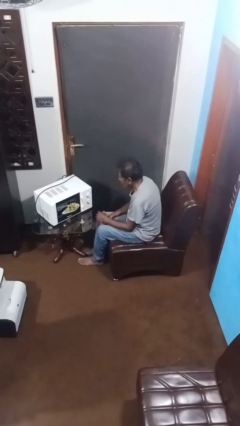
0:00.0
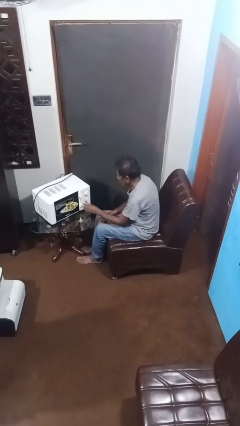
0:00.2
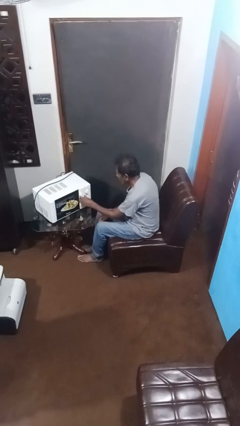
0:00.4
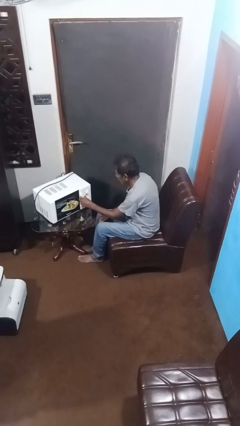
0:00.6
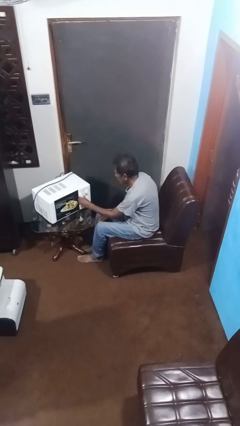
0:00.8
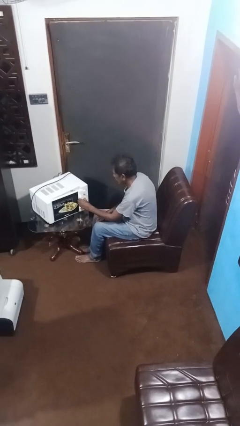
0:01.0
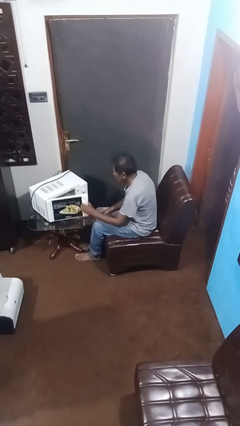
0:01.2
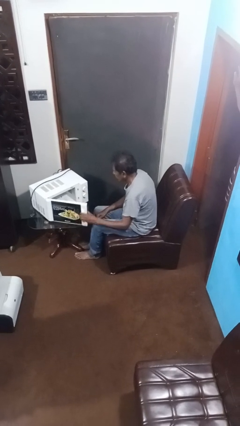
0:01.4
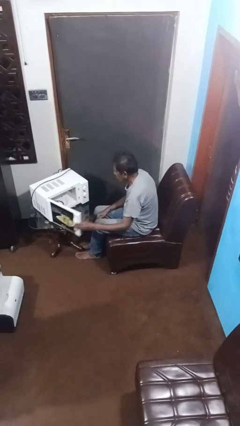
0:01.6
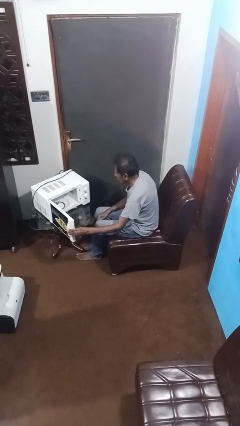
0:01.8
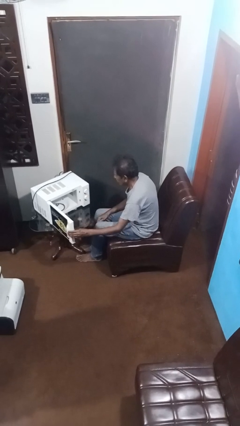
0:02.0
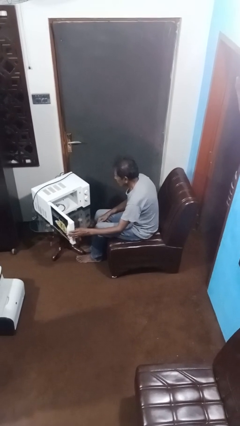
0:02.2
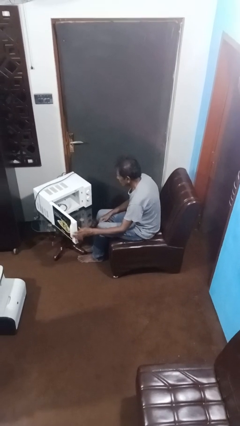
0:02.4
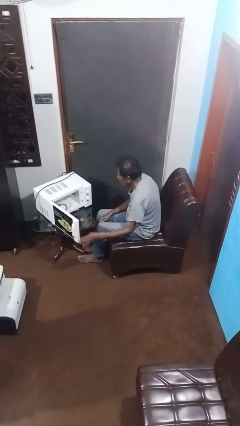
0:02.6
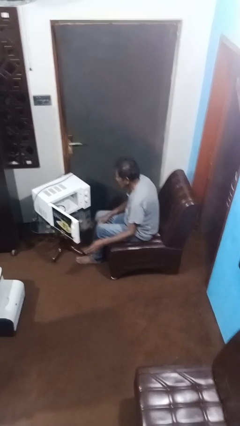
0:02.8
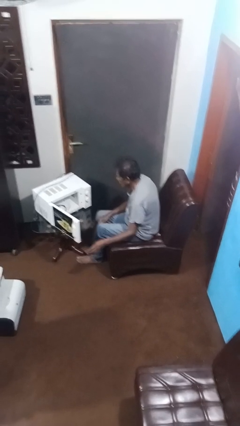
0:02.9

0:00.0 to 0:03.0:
person opens microwave

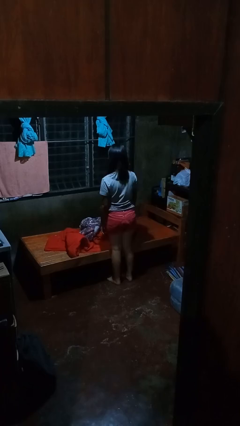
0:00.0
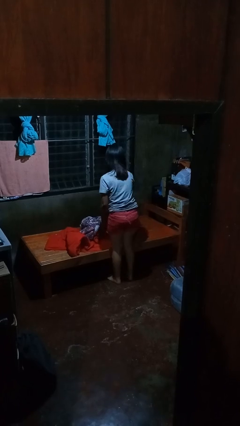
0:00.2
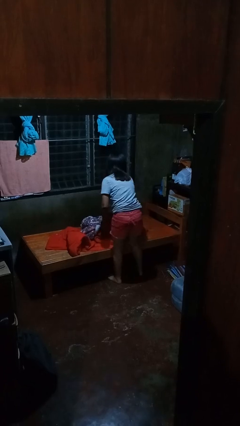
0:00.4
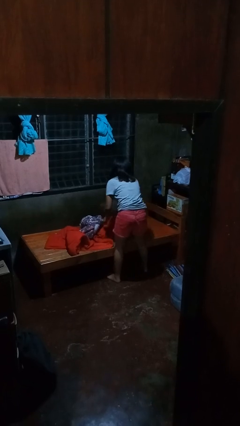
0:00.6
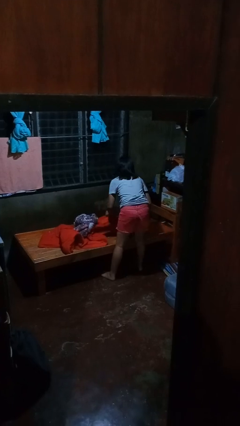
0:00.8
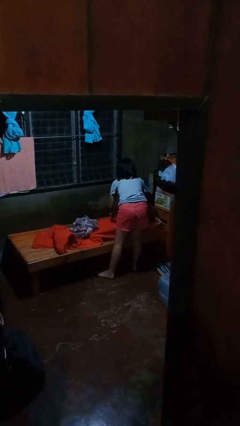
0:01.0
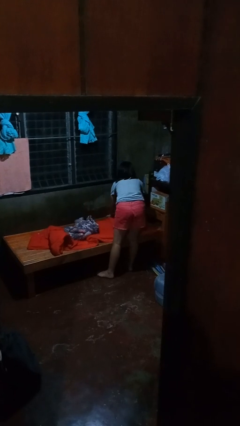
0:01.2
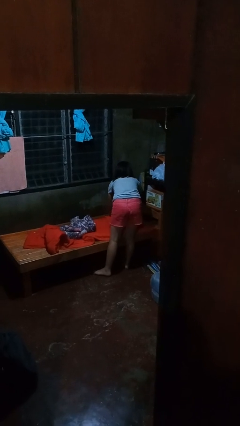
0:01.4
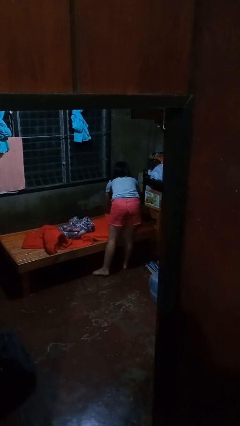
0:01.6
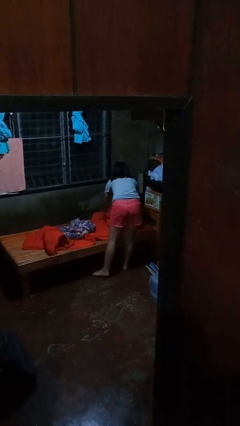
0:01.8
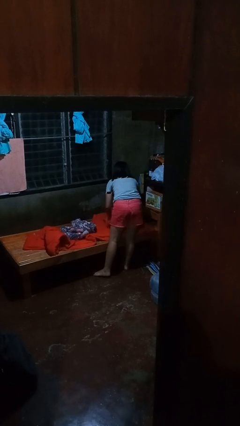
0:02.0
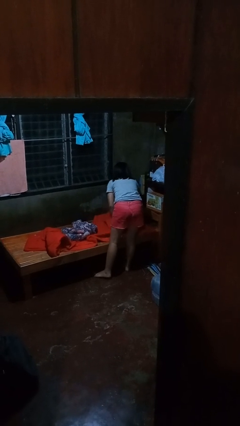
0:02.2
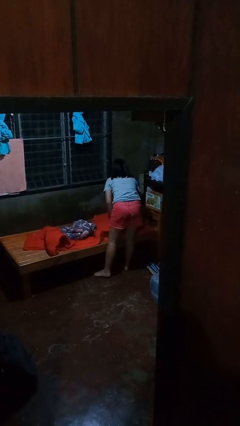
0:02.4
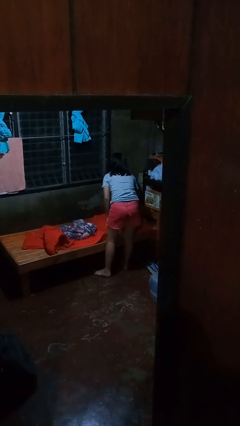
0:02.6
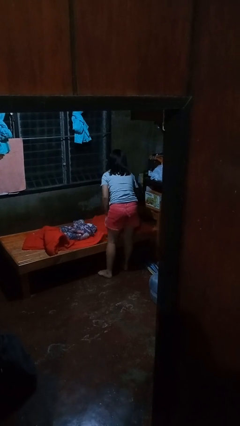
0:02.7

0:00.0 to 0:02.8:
person makes bed

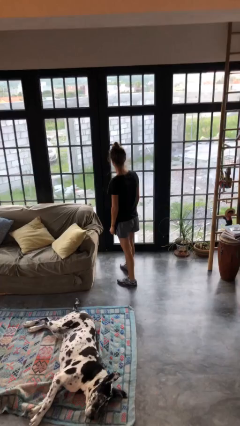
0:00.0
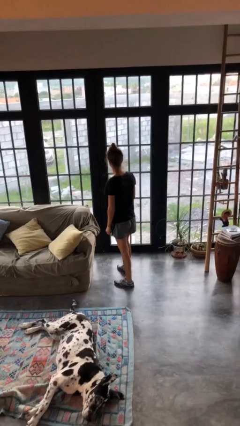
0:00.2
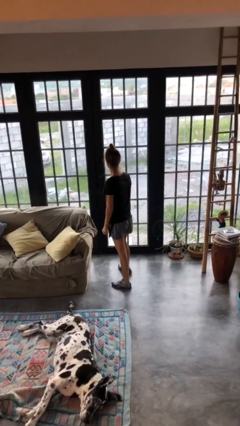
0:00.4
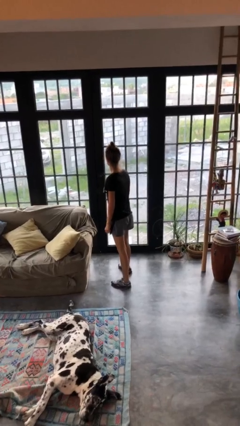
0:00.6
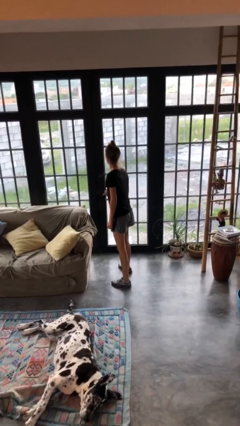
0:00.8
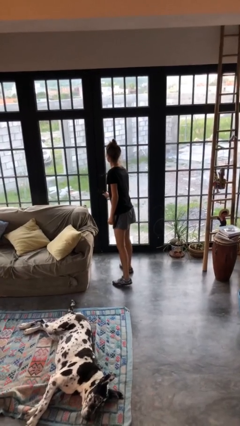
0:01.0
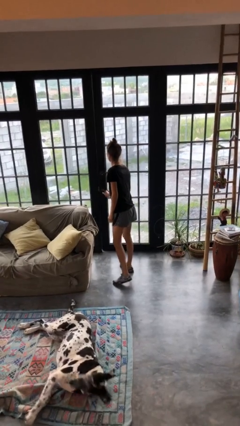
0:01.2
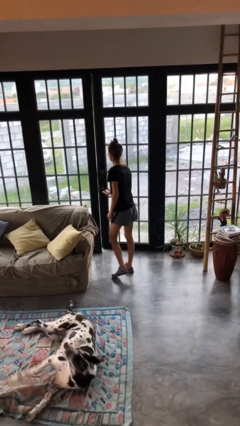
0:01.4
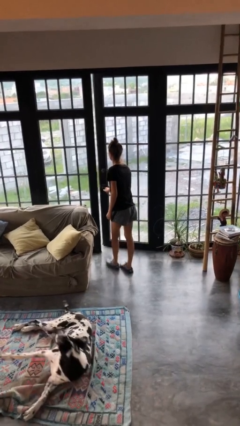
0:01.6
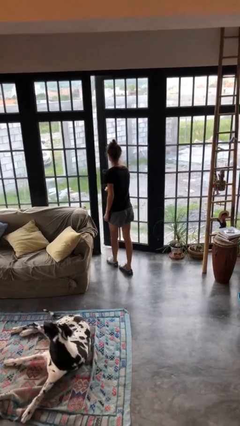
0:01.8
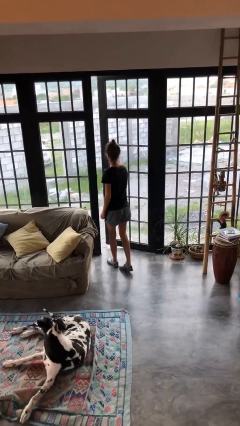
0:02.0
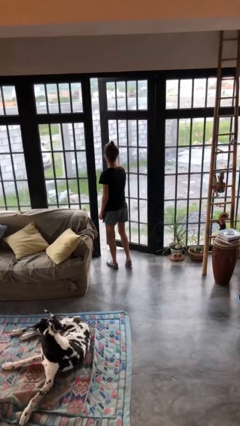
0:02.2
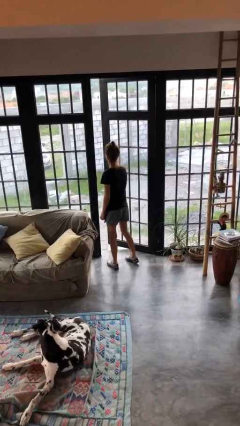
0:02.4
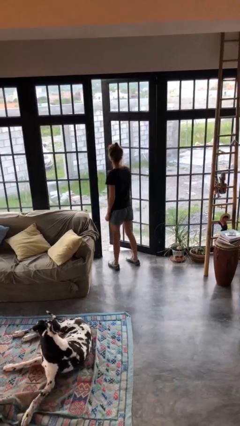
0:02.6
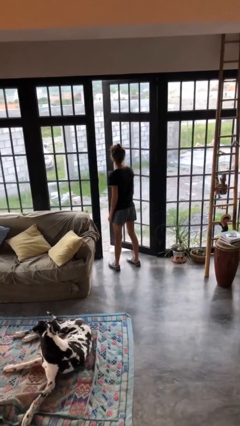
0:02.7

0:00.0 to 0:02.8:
person opens facility door

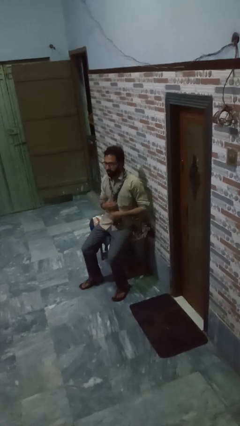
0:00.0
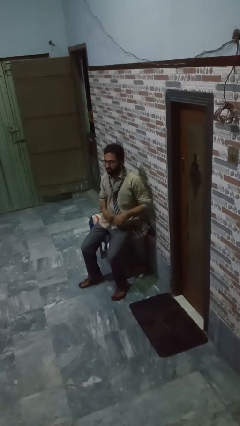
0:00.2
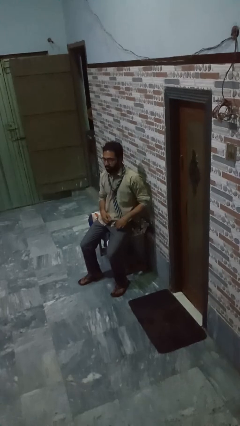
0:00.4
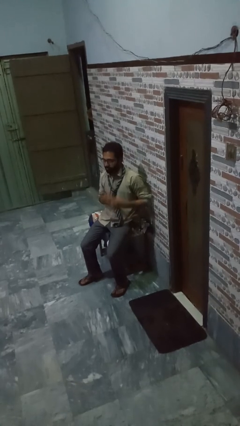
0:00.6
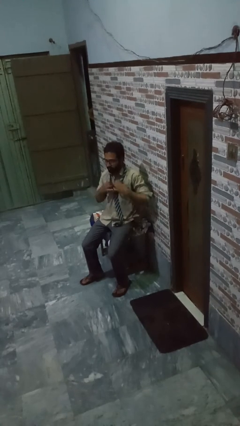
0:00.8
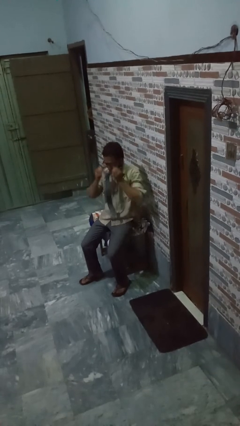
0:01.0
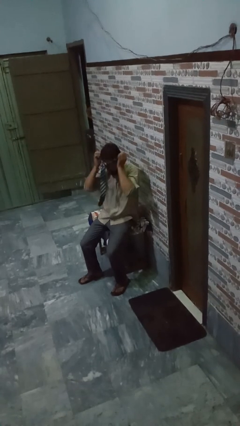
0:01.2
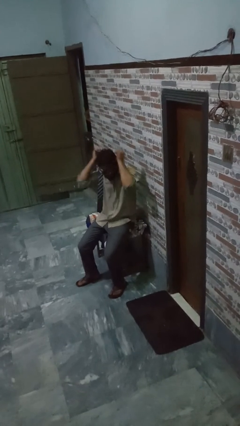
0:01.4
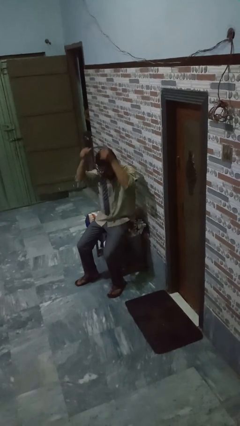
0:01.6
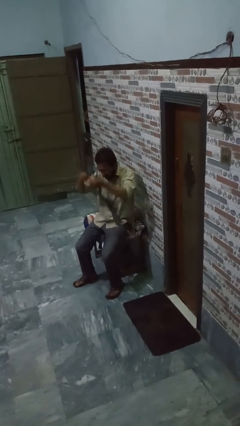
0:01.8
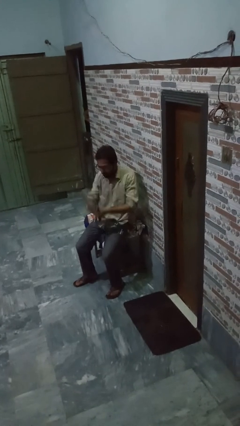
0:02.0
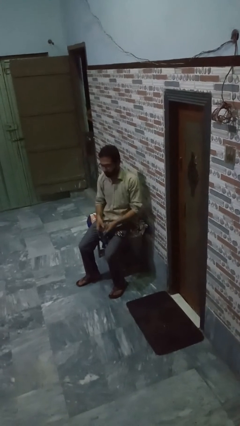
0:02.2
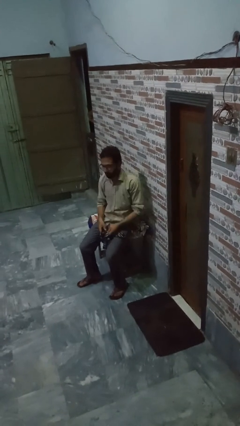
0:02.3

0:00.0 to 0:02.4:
person takes off necktie

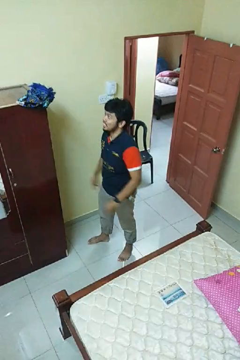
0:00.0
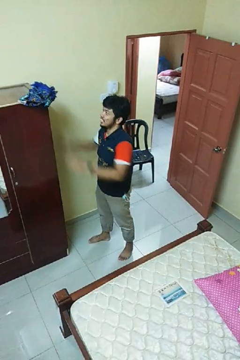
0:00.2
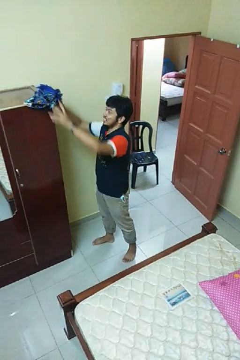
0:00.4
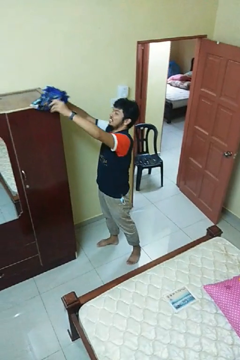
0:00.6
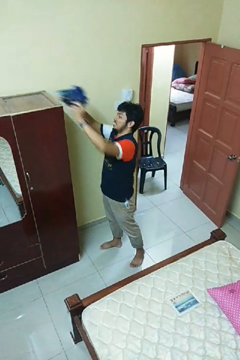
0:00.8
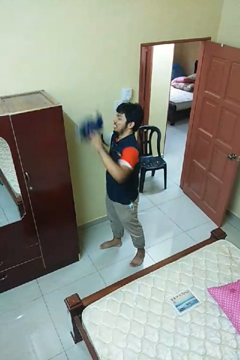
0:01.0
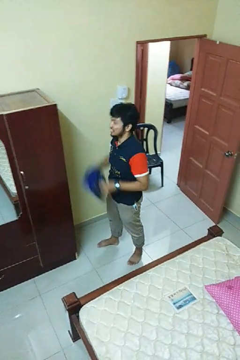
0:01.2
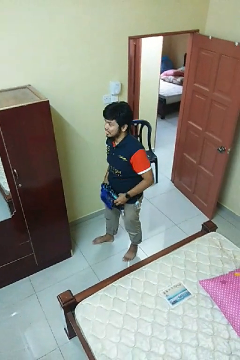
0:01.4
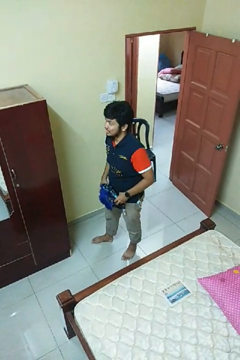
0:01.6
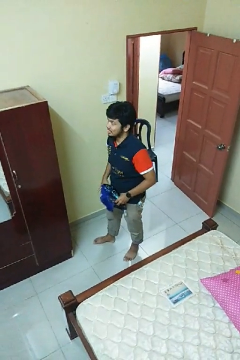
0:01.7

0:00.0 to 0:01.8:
person picks up object from countertop

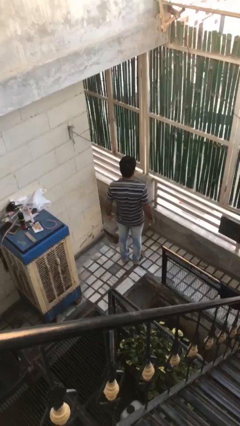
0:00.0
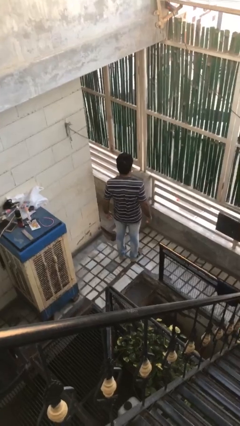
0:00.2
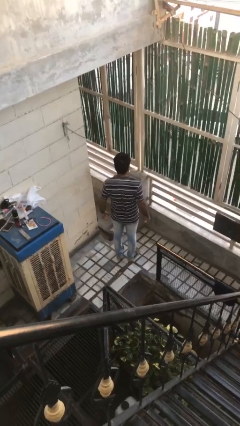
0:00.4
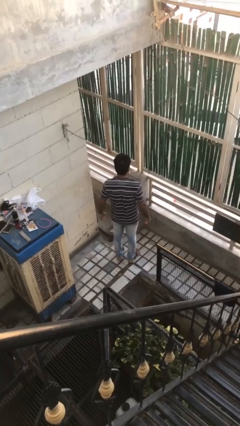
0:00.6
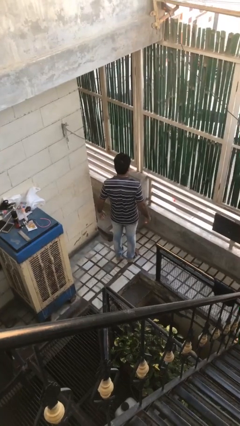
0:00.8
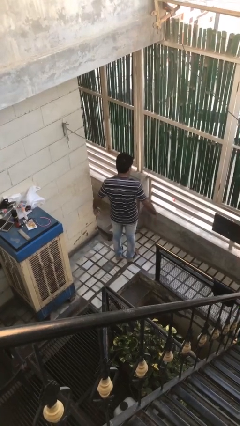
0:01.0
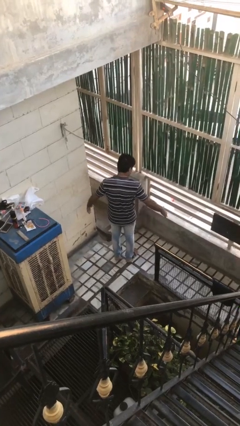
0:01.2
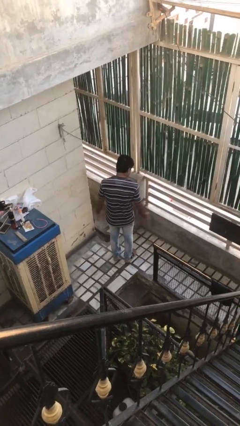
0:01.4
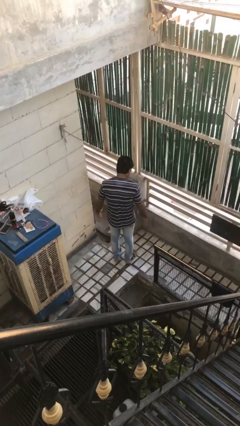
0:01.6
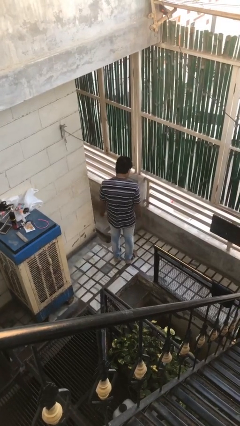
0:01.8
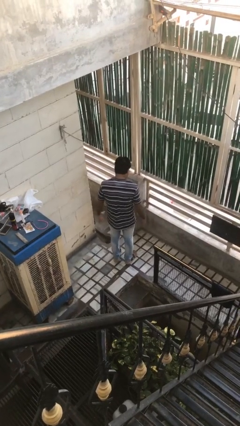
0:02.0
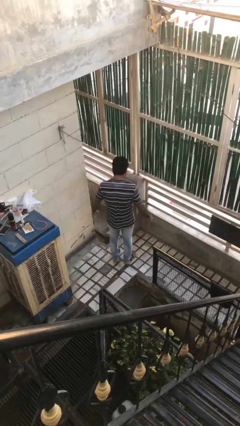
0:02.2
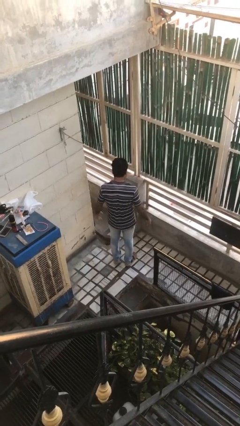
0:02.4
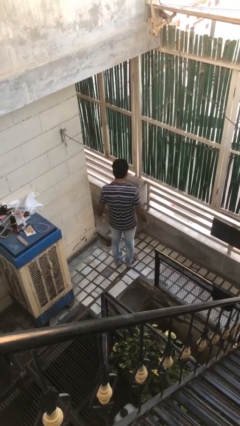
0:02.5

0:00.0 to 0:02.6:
person slaps hands on thighs

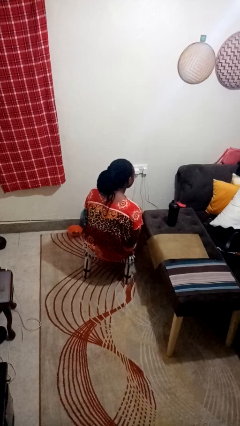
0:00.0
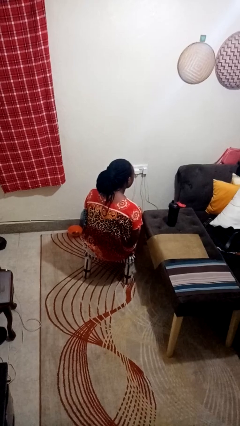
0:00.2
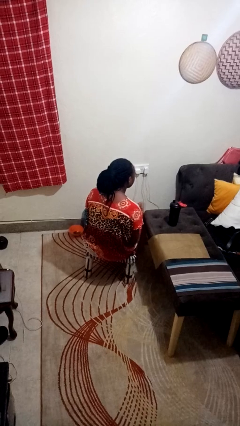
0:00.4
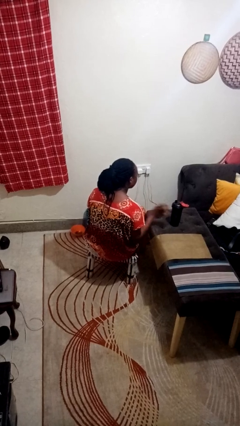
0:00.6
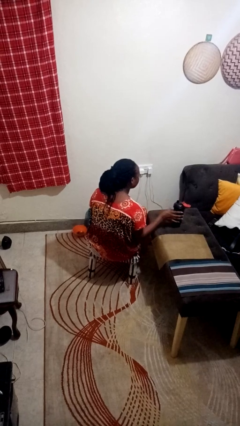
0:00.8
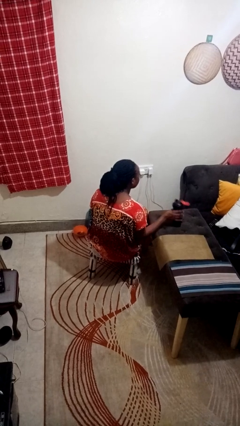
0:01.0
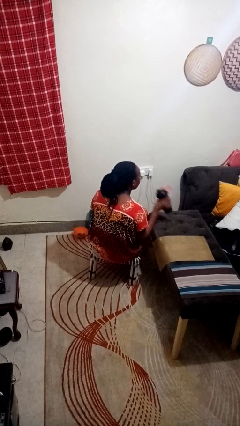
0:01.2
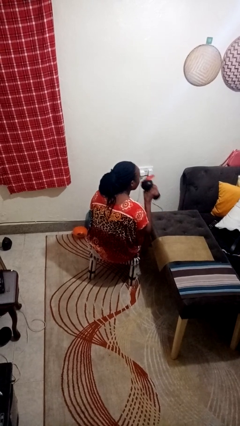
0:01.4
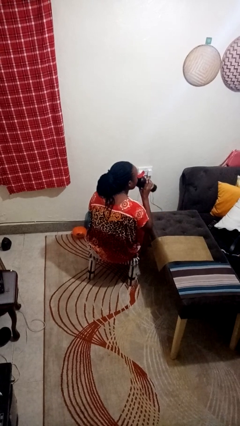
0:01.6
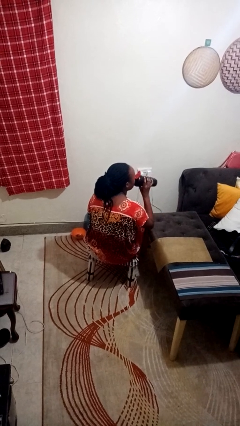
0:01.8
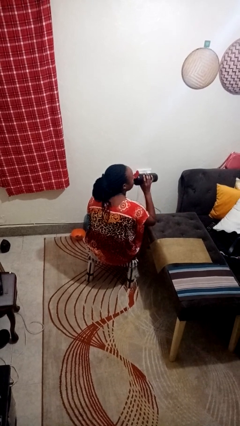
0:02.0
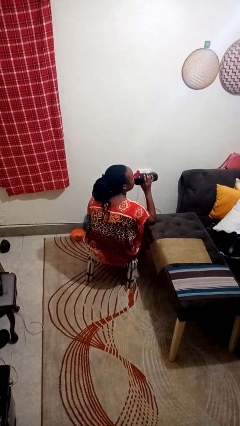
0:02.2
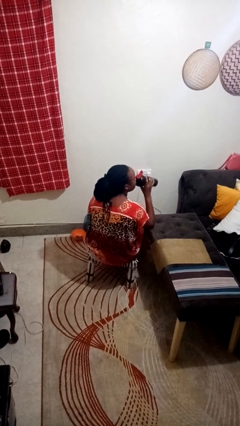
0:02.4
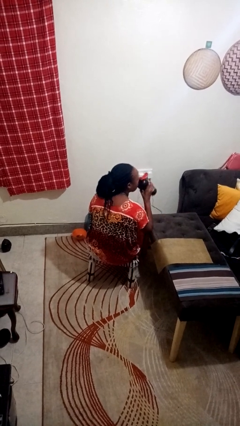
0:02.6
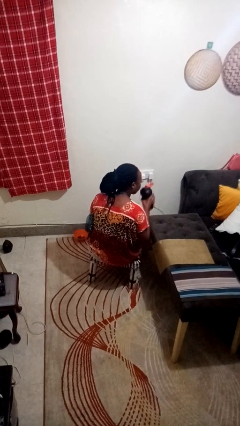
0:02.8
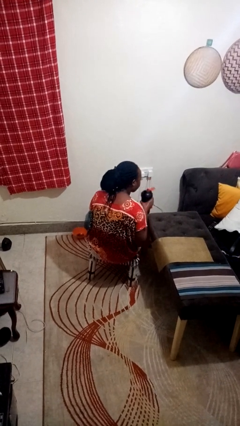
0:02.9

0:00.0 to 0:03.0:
person drinks from cup
